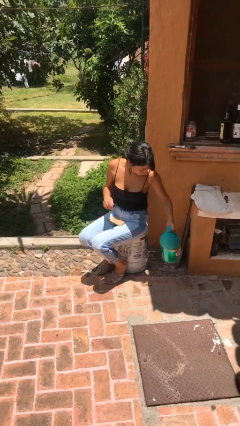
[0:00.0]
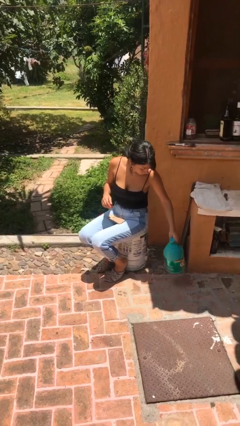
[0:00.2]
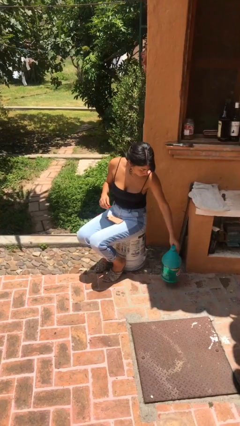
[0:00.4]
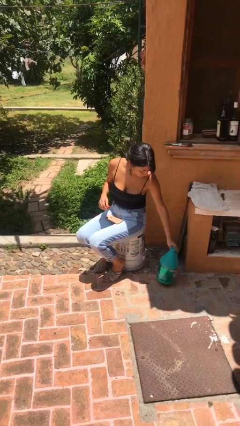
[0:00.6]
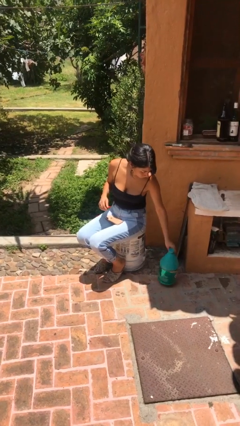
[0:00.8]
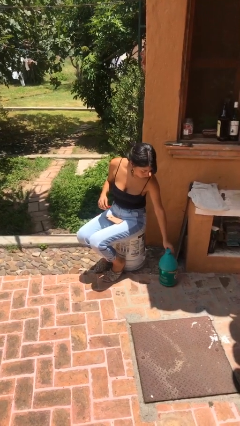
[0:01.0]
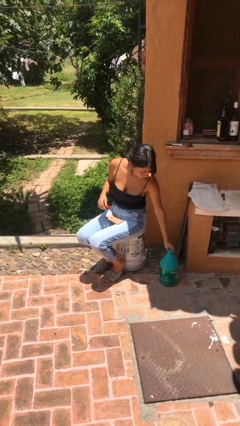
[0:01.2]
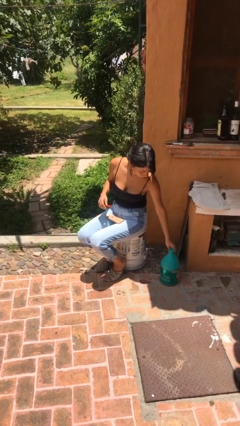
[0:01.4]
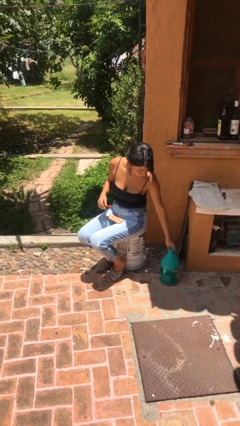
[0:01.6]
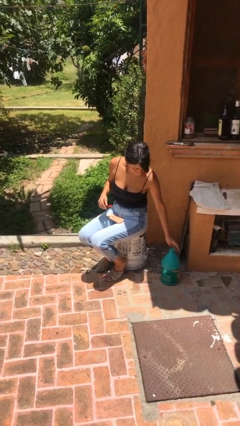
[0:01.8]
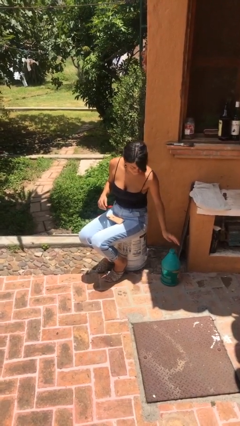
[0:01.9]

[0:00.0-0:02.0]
person puts down object on floor

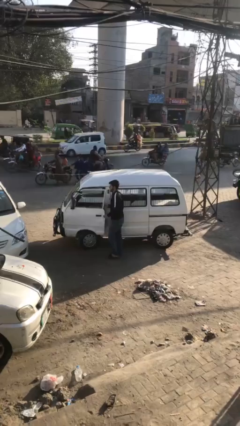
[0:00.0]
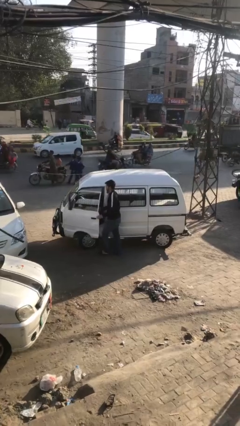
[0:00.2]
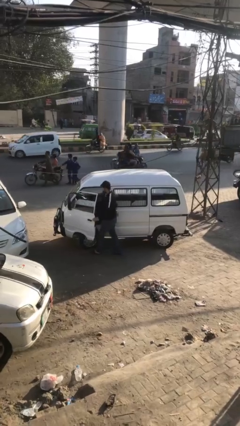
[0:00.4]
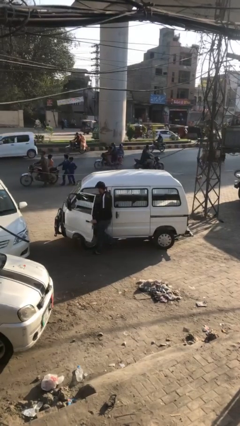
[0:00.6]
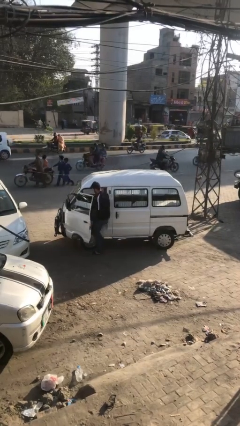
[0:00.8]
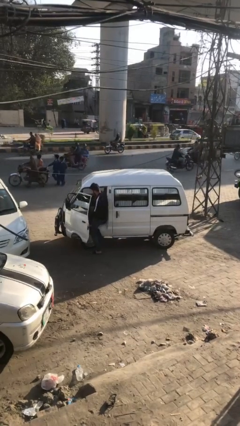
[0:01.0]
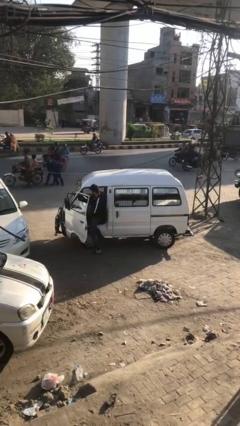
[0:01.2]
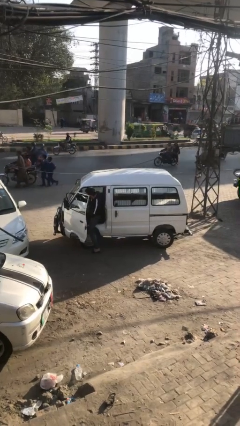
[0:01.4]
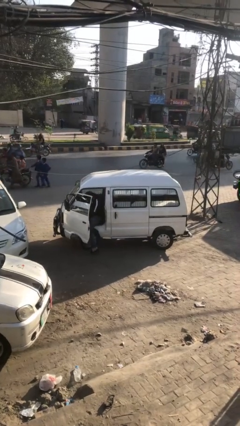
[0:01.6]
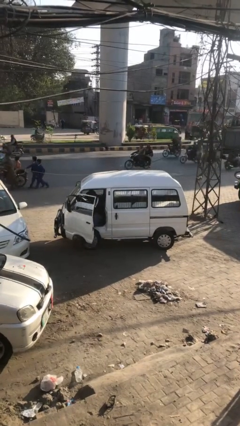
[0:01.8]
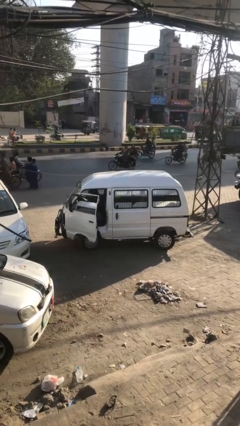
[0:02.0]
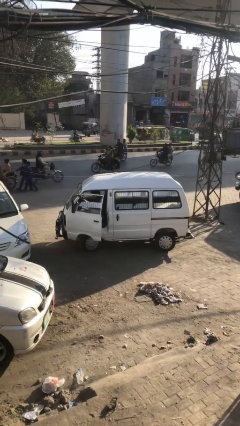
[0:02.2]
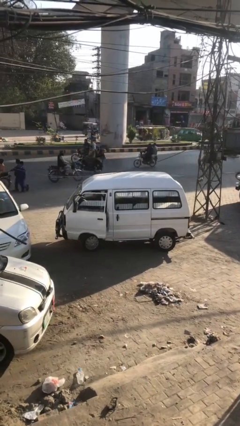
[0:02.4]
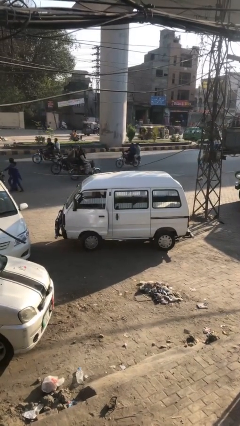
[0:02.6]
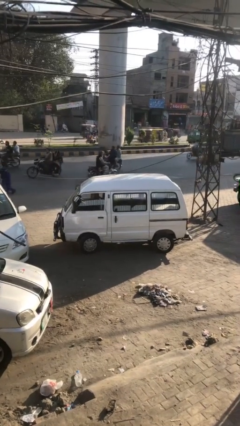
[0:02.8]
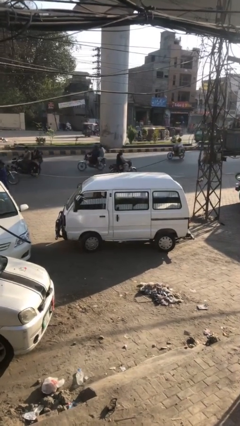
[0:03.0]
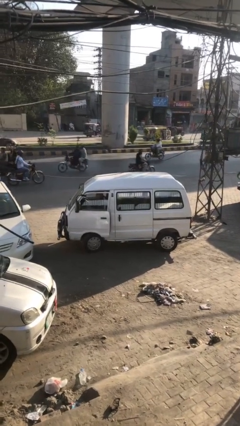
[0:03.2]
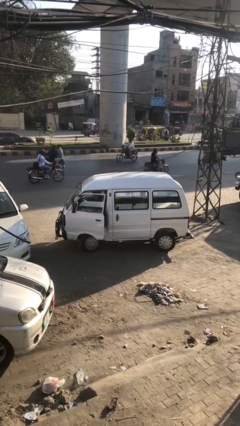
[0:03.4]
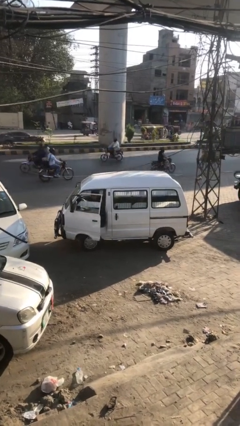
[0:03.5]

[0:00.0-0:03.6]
car picks up person

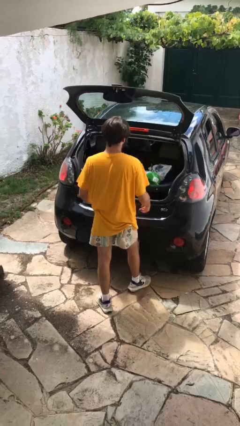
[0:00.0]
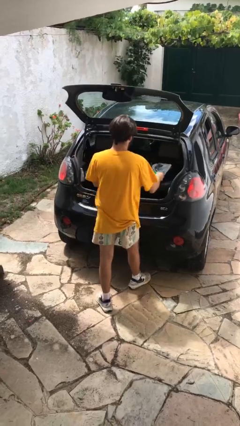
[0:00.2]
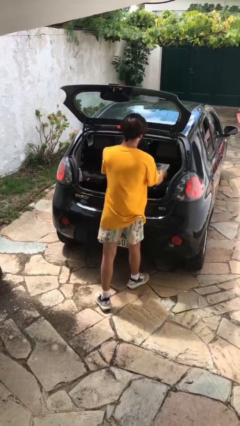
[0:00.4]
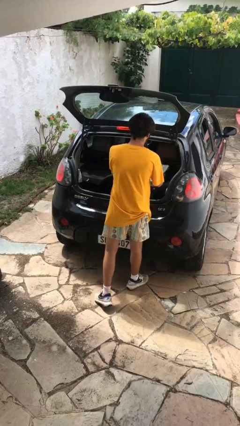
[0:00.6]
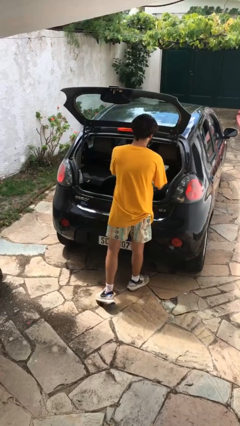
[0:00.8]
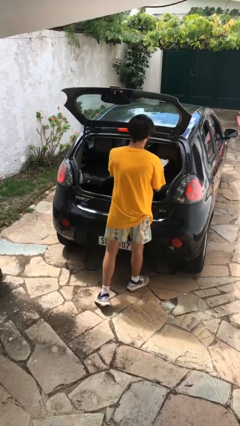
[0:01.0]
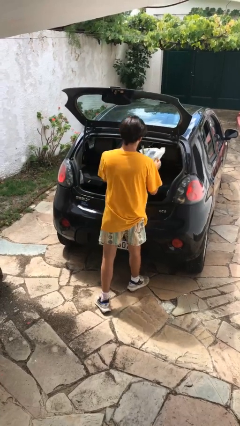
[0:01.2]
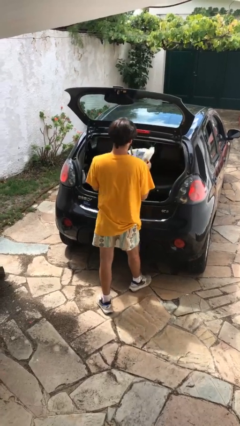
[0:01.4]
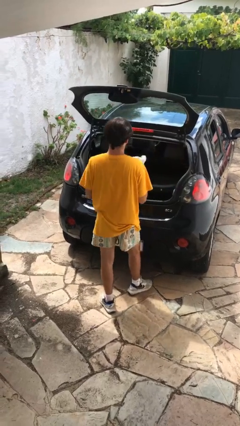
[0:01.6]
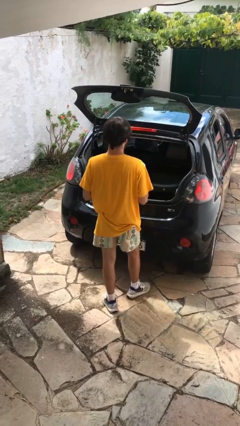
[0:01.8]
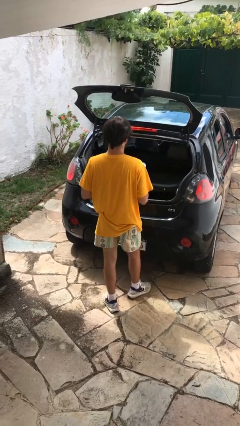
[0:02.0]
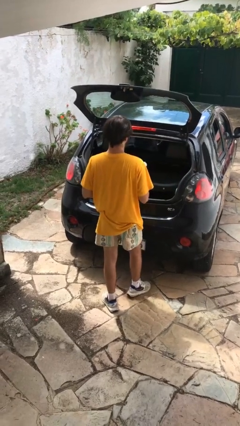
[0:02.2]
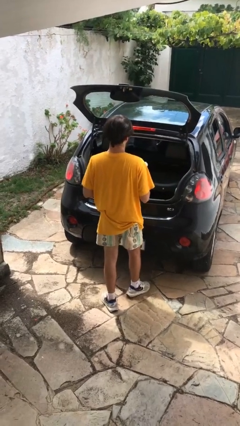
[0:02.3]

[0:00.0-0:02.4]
person unloads car

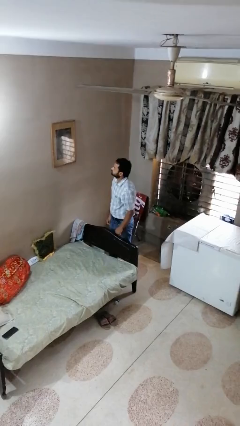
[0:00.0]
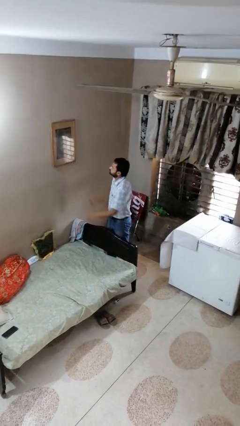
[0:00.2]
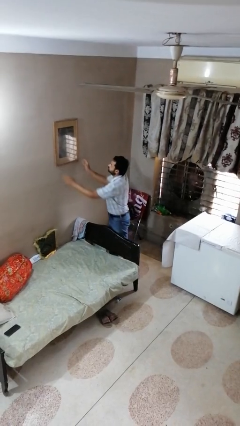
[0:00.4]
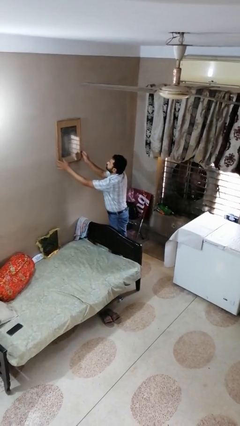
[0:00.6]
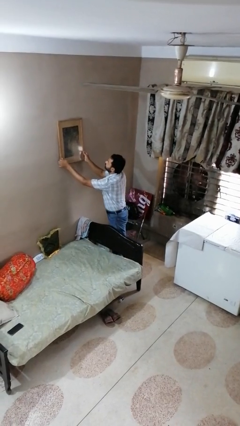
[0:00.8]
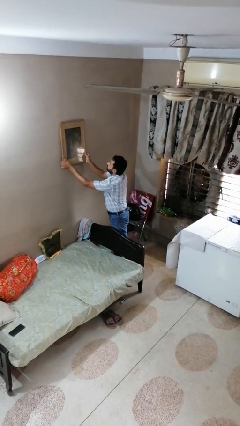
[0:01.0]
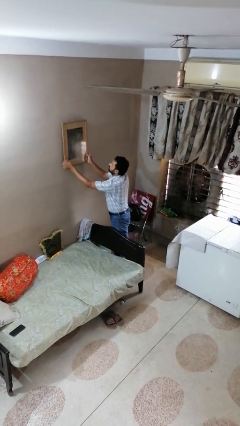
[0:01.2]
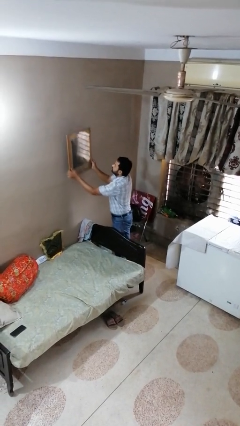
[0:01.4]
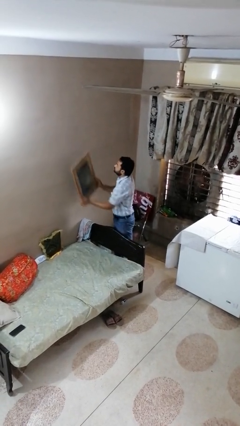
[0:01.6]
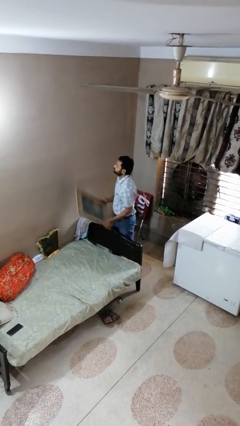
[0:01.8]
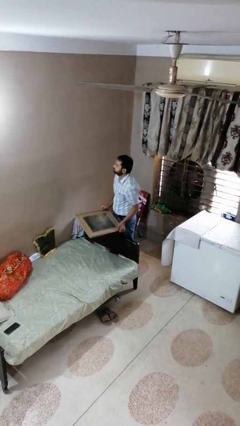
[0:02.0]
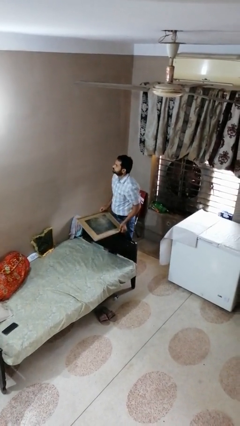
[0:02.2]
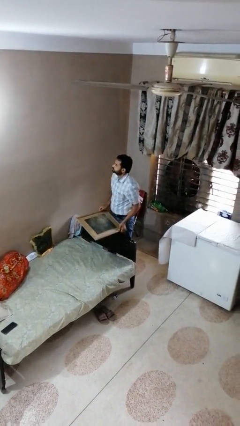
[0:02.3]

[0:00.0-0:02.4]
person takes down picture frame

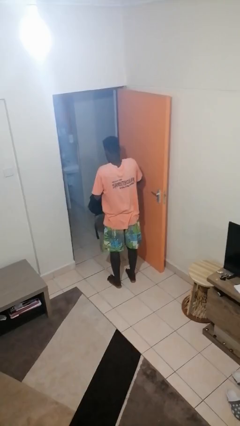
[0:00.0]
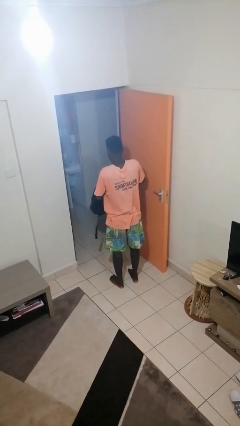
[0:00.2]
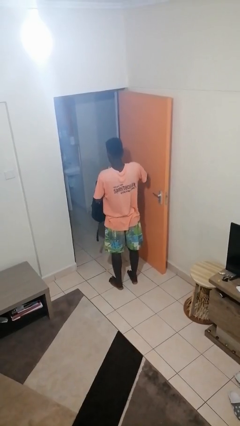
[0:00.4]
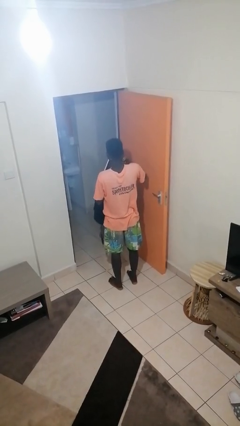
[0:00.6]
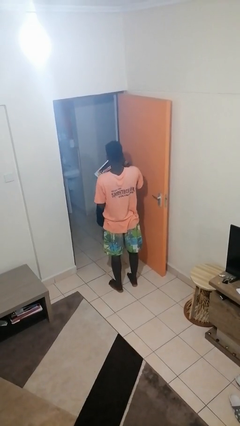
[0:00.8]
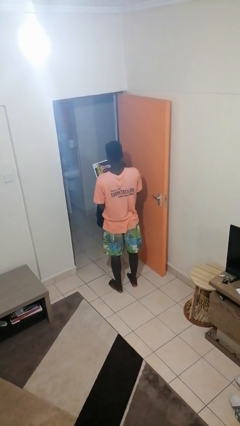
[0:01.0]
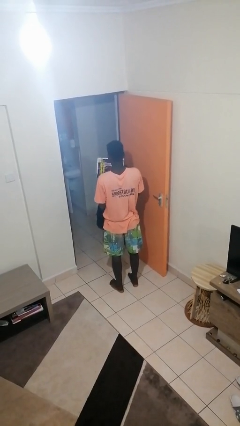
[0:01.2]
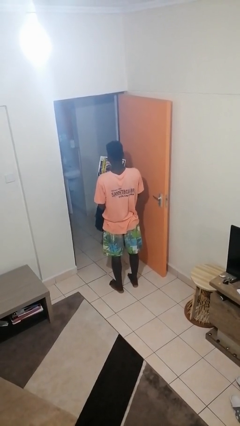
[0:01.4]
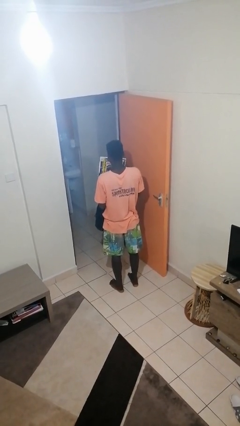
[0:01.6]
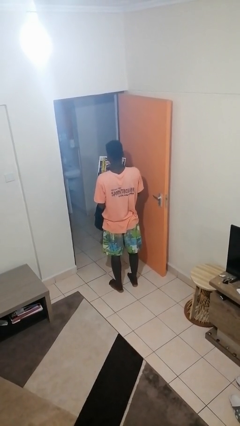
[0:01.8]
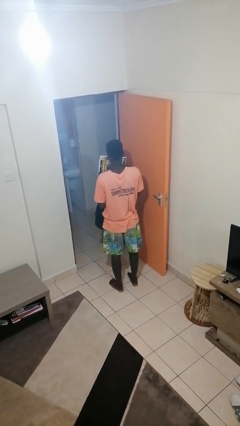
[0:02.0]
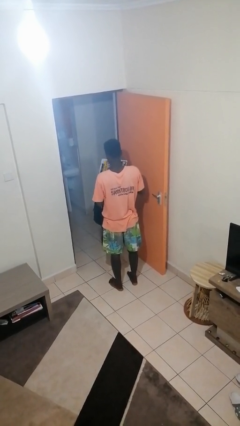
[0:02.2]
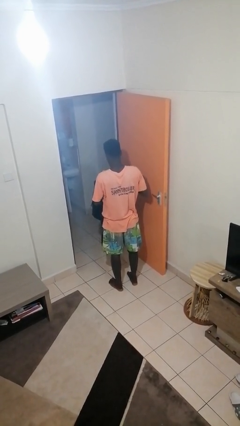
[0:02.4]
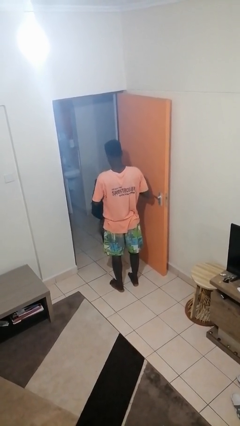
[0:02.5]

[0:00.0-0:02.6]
person takes object from backpack

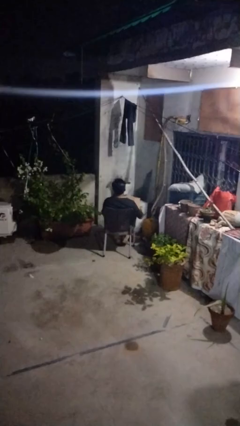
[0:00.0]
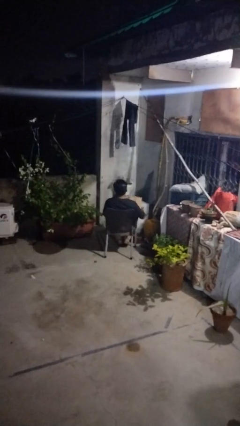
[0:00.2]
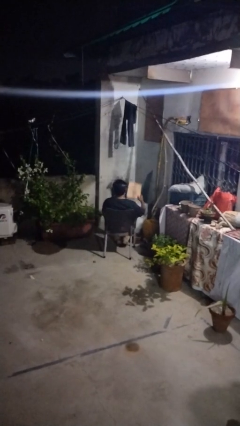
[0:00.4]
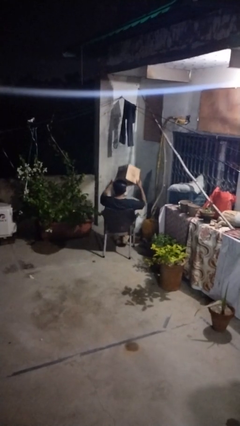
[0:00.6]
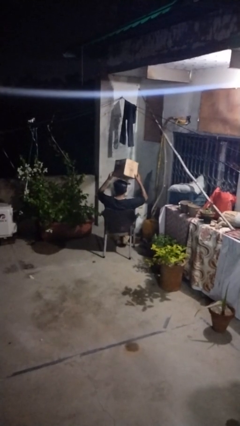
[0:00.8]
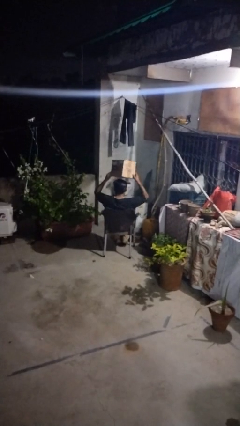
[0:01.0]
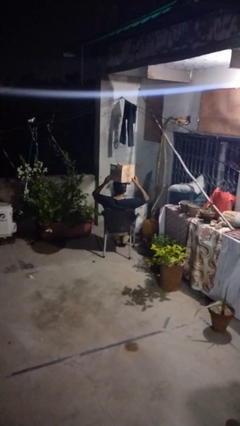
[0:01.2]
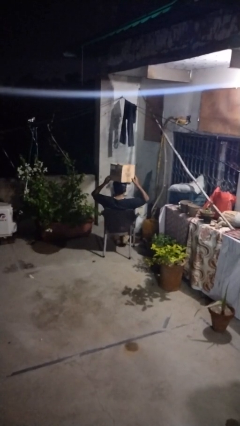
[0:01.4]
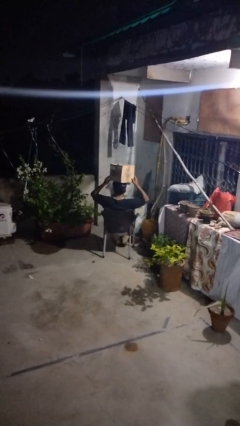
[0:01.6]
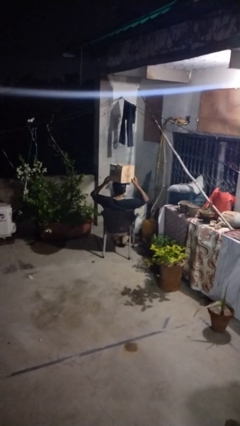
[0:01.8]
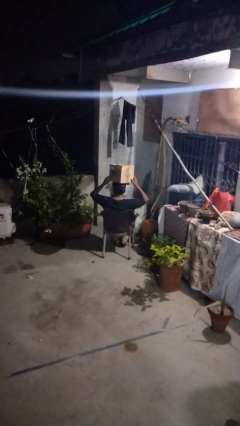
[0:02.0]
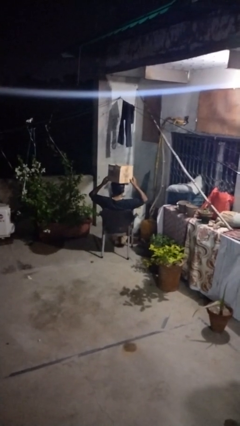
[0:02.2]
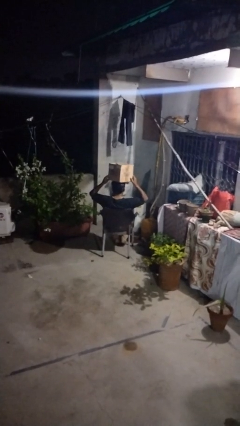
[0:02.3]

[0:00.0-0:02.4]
person holds object above head

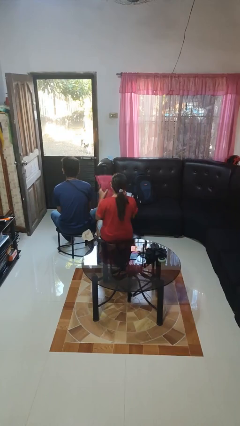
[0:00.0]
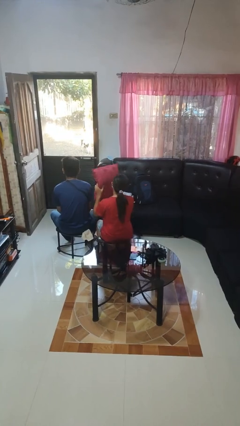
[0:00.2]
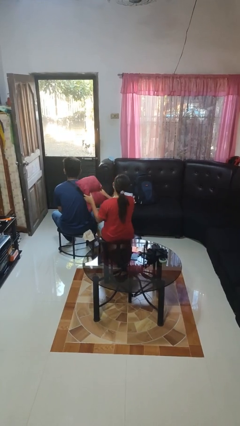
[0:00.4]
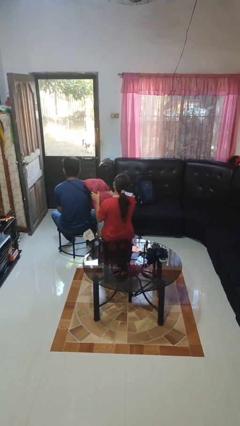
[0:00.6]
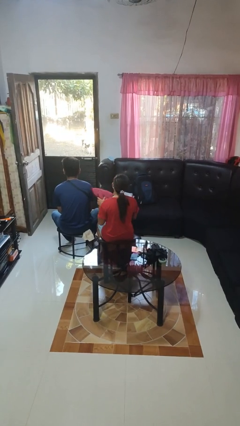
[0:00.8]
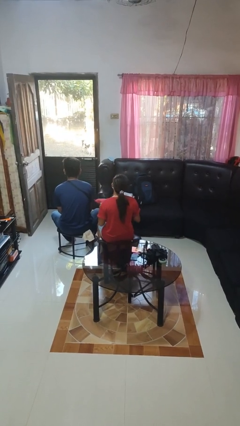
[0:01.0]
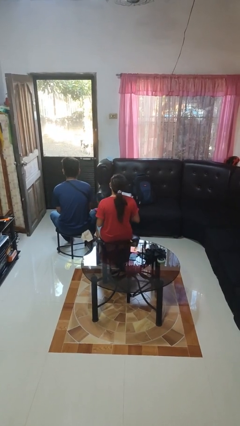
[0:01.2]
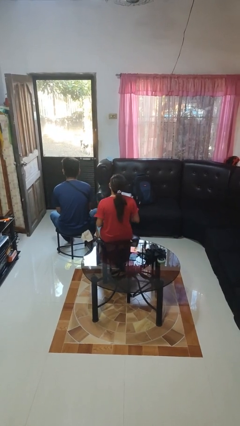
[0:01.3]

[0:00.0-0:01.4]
person hits person with pillow

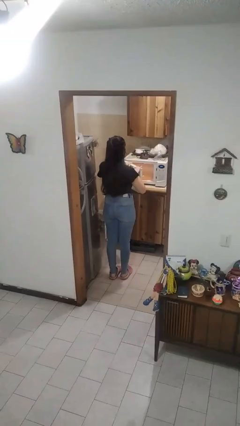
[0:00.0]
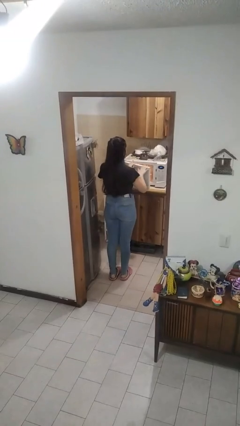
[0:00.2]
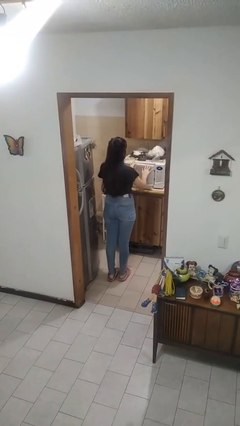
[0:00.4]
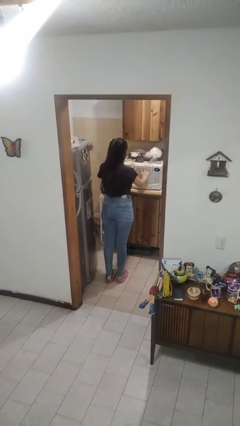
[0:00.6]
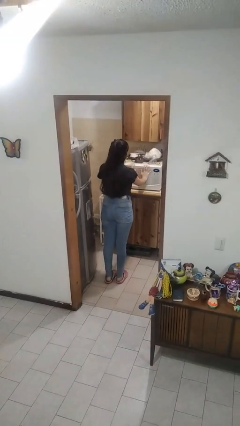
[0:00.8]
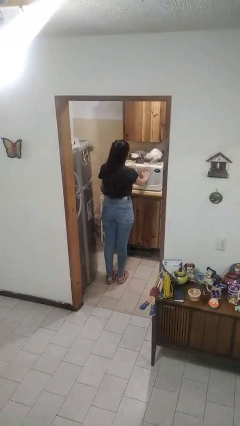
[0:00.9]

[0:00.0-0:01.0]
person closes microwave
